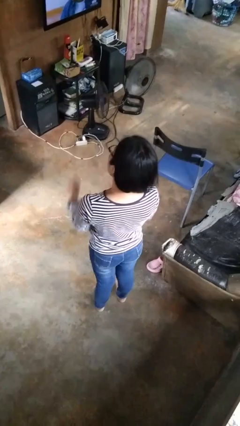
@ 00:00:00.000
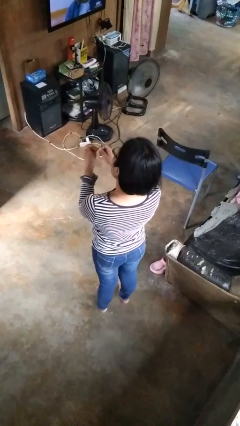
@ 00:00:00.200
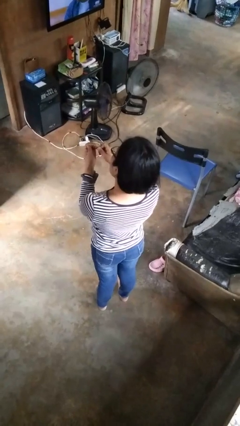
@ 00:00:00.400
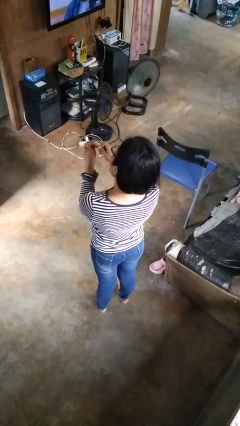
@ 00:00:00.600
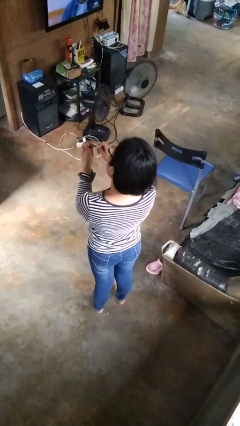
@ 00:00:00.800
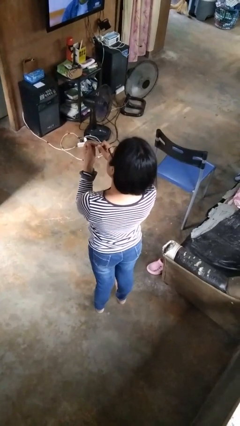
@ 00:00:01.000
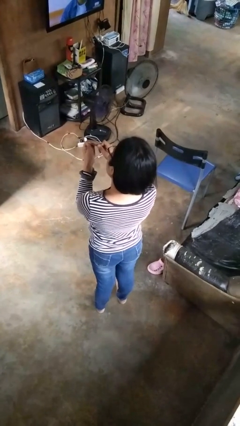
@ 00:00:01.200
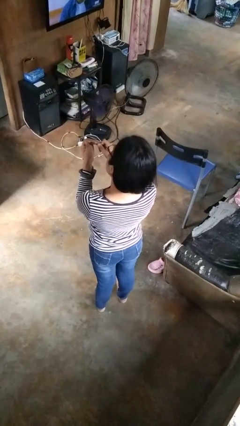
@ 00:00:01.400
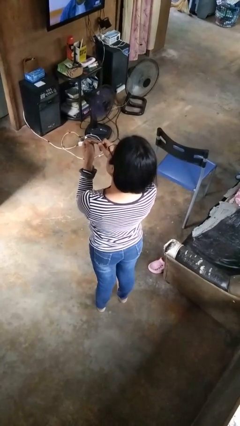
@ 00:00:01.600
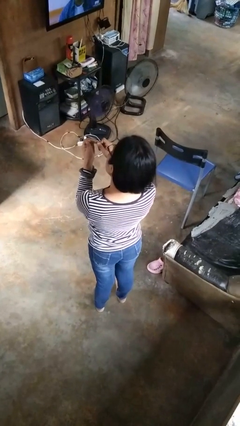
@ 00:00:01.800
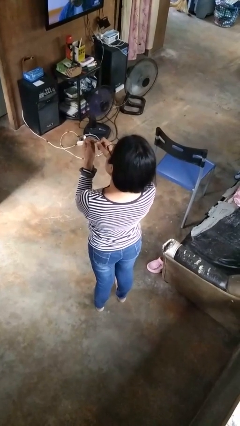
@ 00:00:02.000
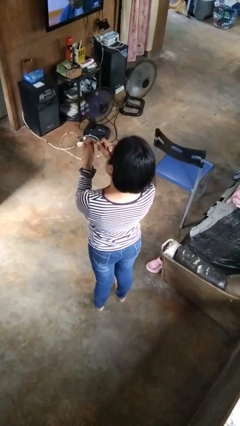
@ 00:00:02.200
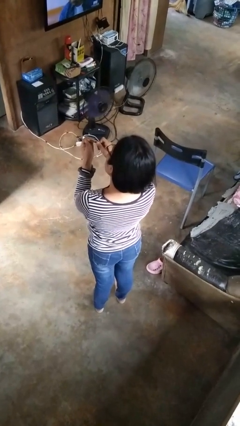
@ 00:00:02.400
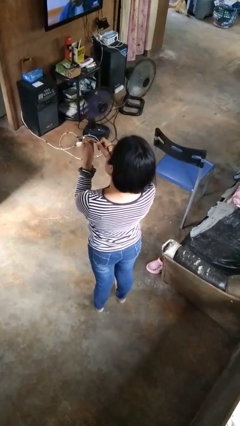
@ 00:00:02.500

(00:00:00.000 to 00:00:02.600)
person files fingernails

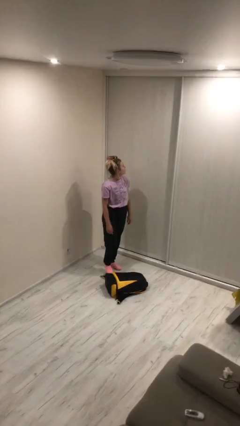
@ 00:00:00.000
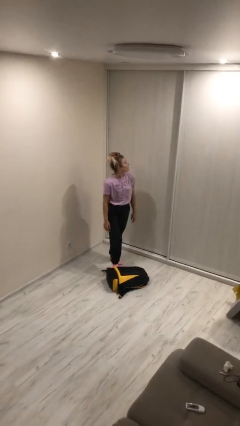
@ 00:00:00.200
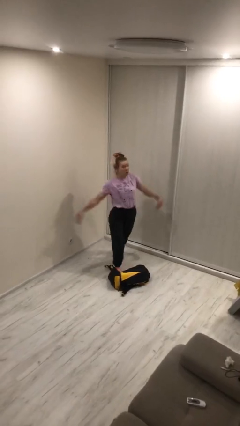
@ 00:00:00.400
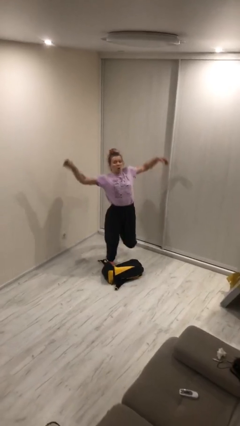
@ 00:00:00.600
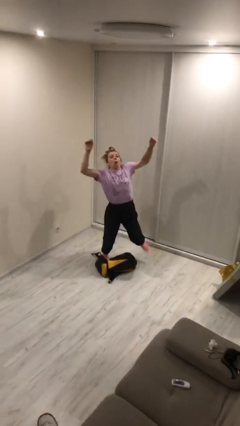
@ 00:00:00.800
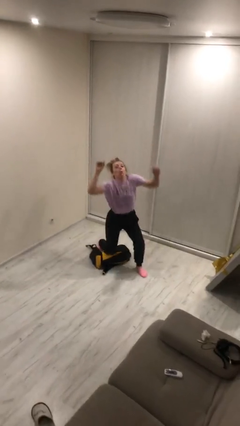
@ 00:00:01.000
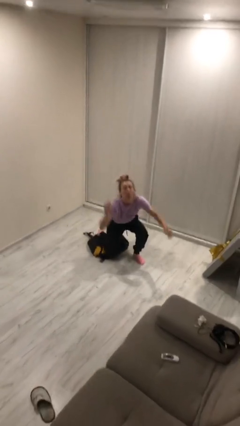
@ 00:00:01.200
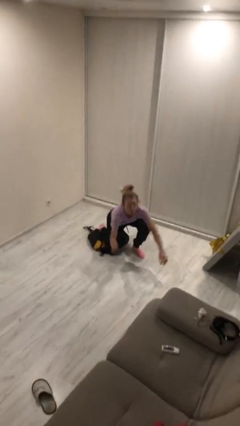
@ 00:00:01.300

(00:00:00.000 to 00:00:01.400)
person trips on object on floor

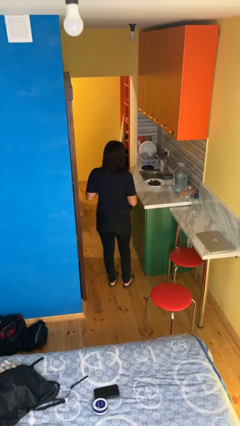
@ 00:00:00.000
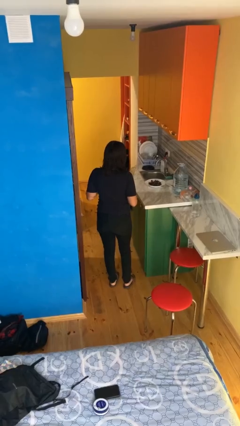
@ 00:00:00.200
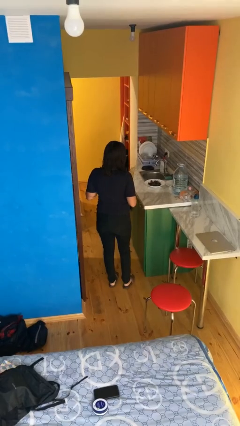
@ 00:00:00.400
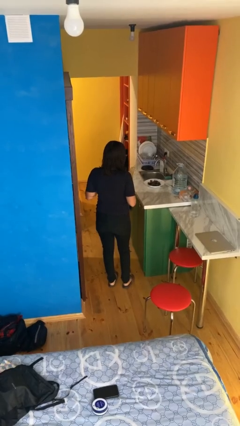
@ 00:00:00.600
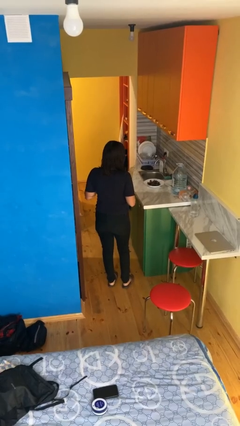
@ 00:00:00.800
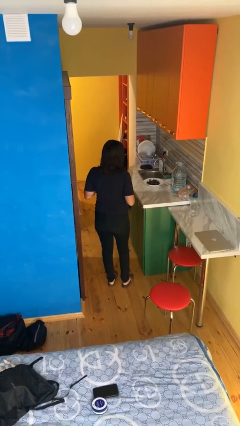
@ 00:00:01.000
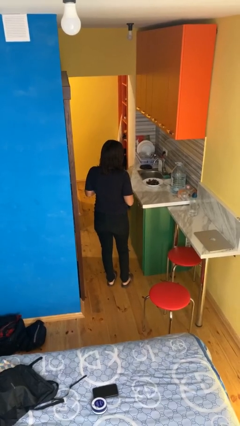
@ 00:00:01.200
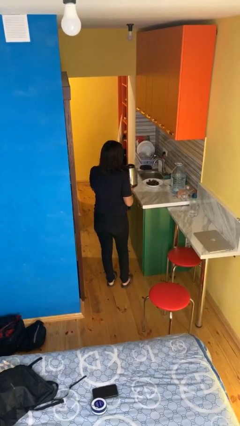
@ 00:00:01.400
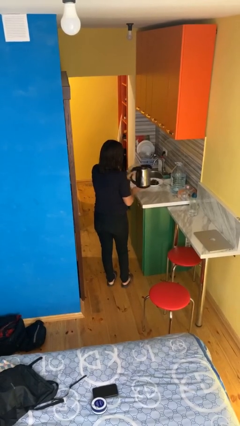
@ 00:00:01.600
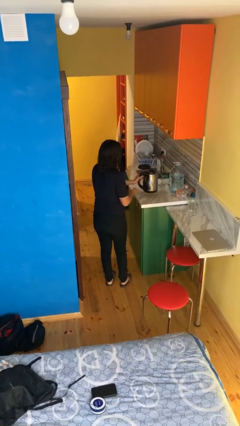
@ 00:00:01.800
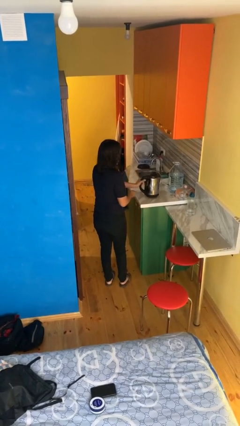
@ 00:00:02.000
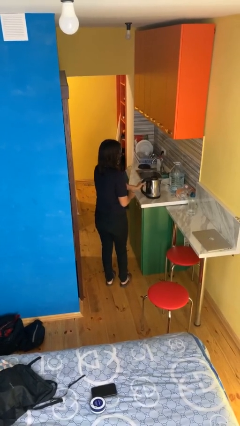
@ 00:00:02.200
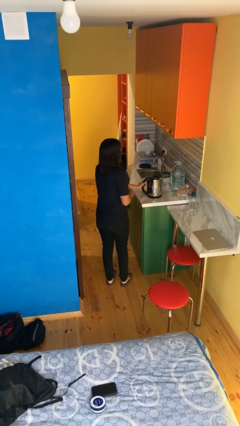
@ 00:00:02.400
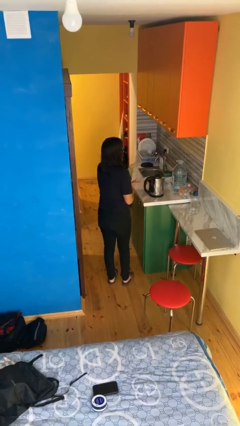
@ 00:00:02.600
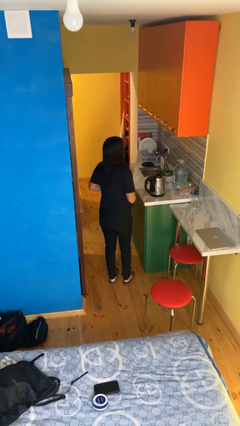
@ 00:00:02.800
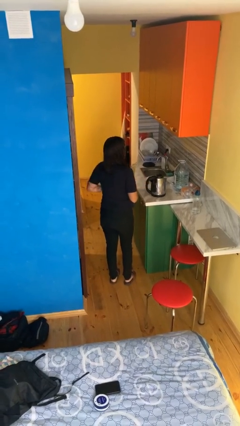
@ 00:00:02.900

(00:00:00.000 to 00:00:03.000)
person puts down object on countertop

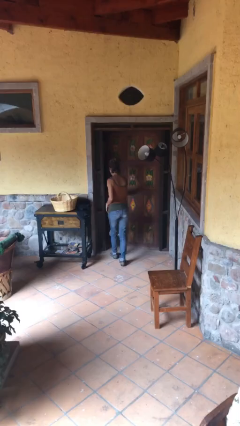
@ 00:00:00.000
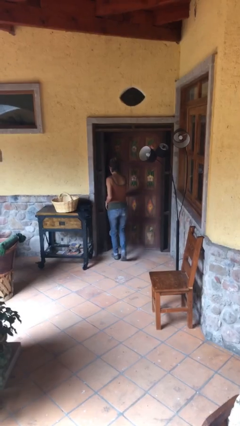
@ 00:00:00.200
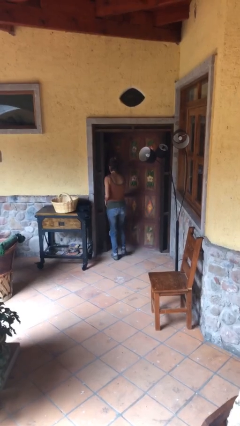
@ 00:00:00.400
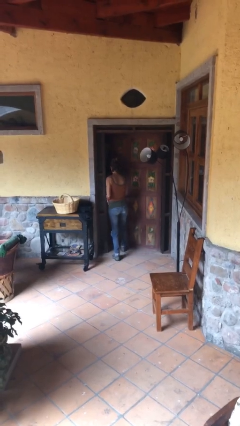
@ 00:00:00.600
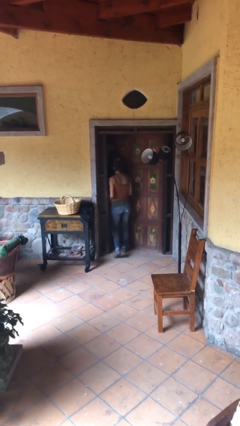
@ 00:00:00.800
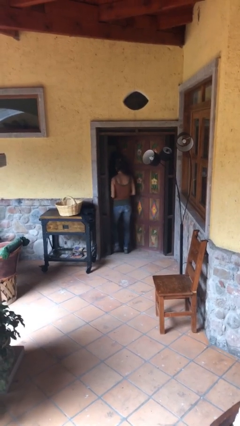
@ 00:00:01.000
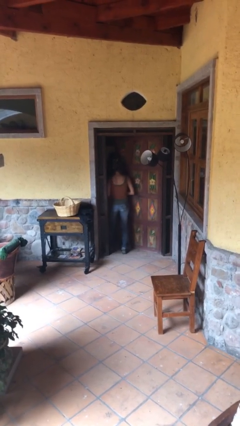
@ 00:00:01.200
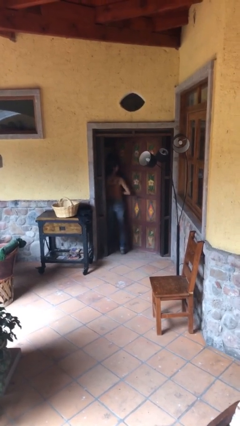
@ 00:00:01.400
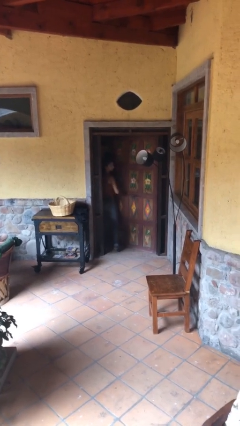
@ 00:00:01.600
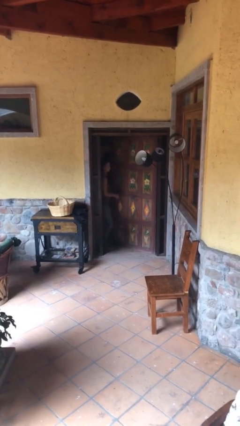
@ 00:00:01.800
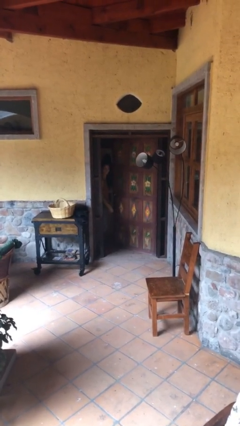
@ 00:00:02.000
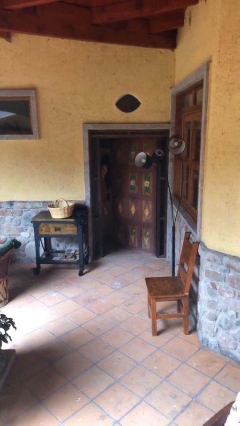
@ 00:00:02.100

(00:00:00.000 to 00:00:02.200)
person exits scene through structure

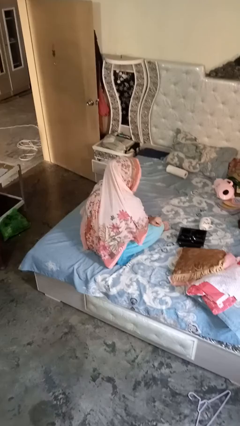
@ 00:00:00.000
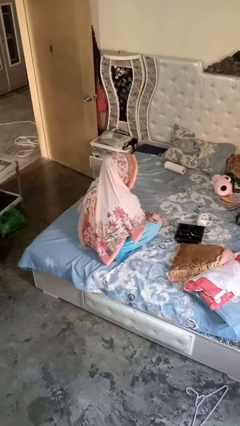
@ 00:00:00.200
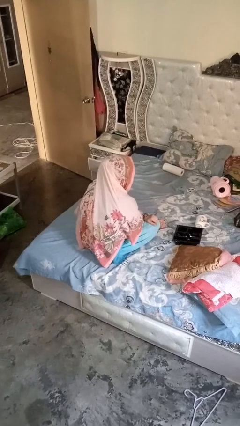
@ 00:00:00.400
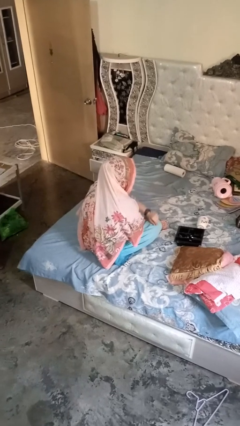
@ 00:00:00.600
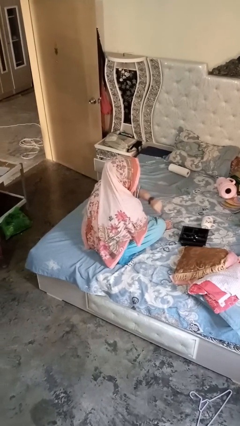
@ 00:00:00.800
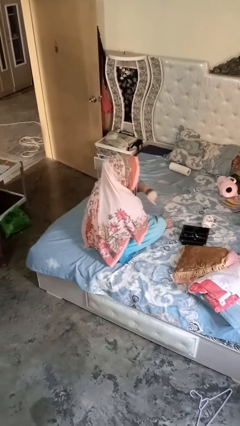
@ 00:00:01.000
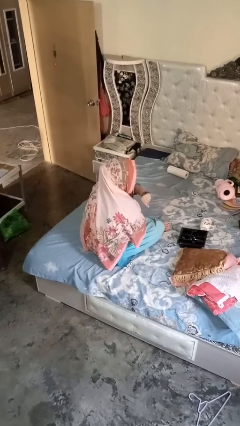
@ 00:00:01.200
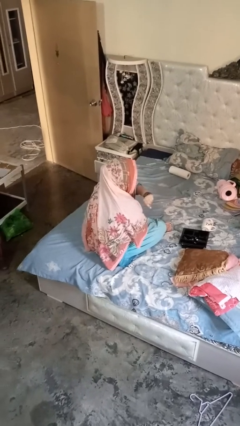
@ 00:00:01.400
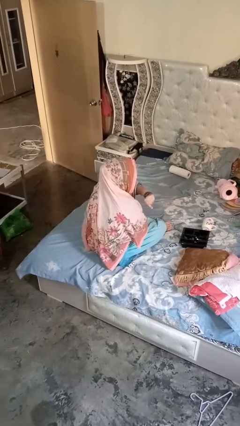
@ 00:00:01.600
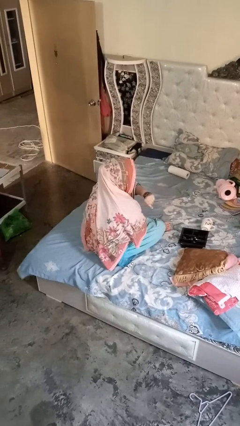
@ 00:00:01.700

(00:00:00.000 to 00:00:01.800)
person gestures watch closely

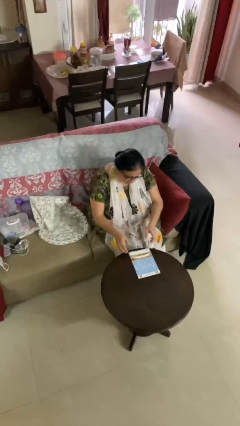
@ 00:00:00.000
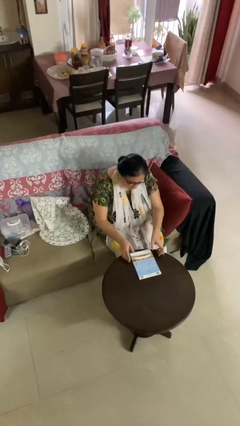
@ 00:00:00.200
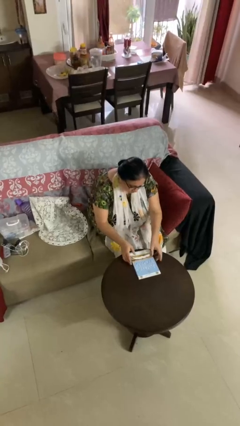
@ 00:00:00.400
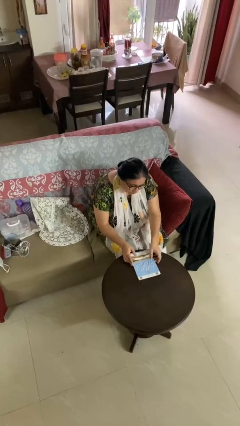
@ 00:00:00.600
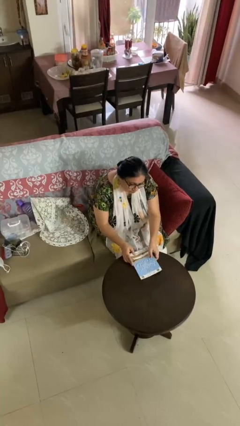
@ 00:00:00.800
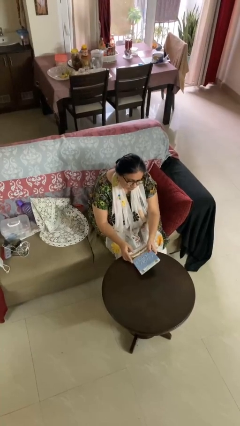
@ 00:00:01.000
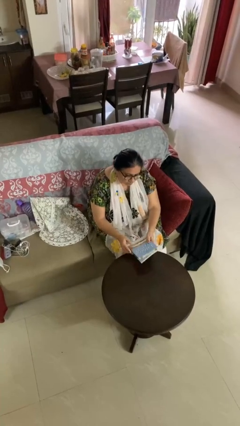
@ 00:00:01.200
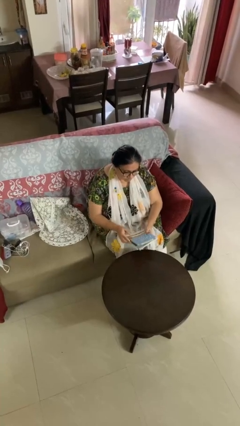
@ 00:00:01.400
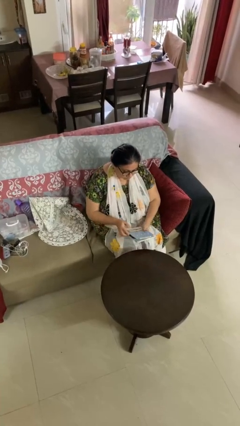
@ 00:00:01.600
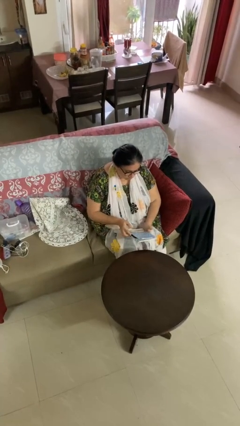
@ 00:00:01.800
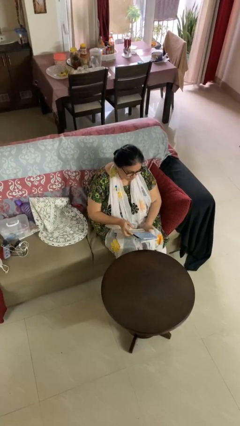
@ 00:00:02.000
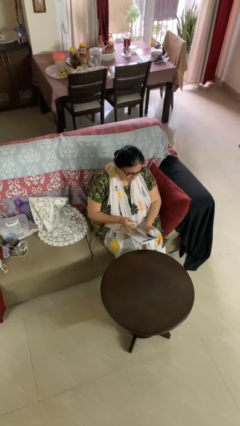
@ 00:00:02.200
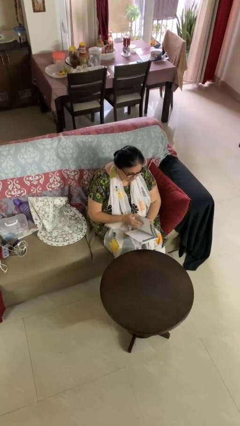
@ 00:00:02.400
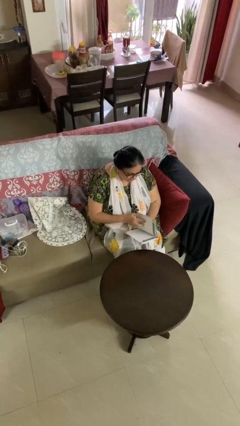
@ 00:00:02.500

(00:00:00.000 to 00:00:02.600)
person picks up object from table

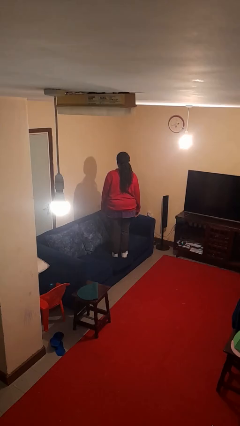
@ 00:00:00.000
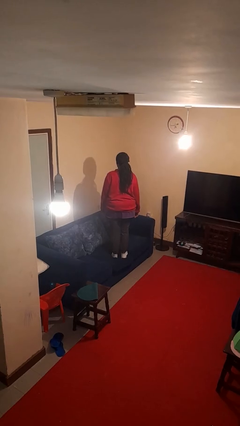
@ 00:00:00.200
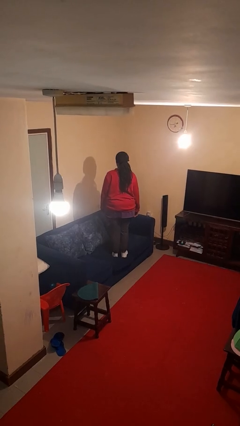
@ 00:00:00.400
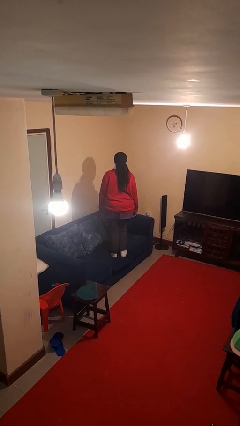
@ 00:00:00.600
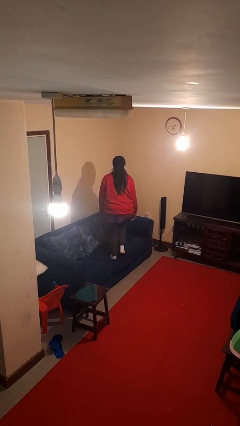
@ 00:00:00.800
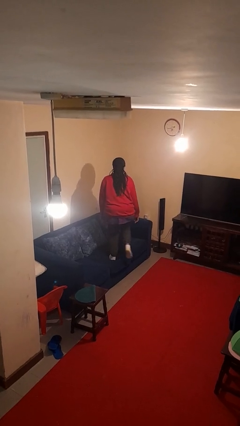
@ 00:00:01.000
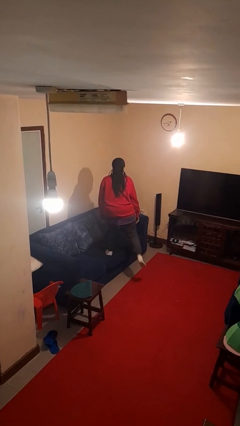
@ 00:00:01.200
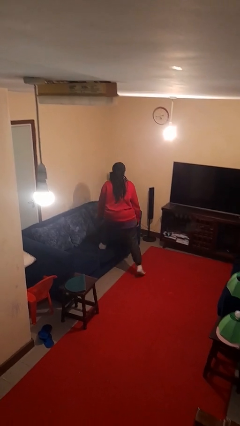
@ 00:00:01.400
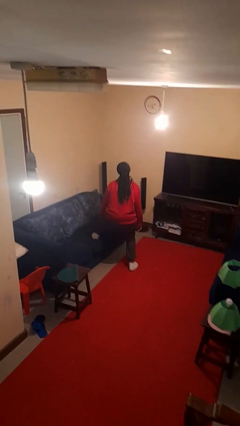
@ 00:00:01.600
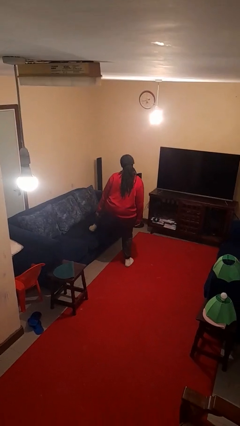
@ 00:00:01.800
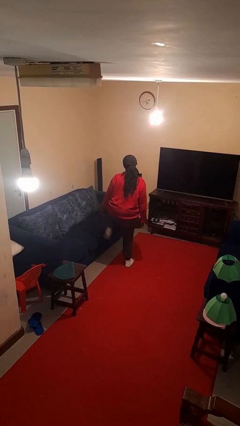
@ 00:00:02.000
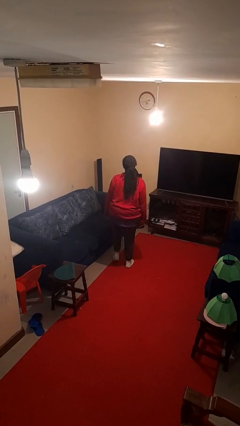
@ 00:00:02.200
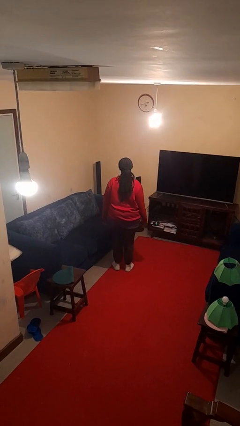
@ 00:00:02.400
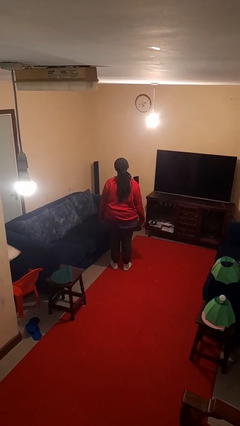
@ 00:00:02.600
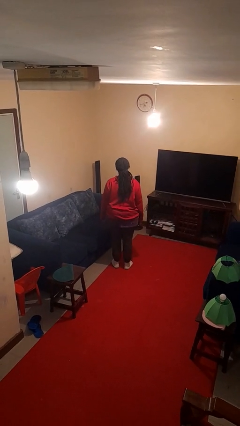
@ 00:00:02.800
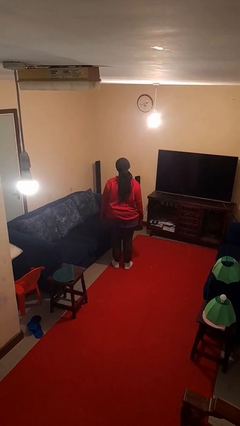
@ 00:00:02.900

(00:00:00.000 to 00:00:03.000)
person climbs off couch
